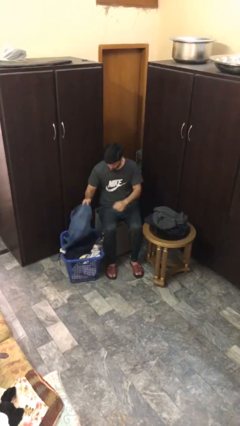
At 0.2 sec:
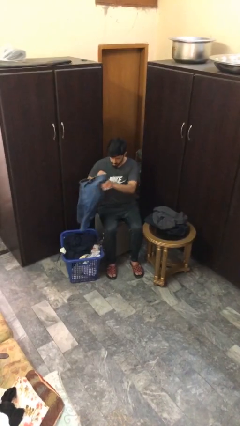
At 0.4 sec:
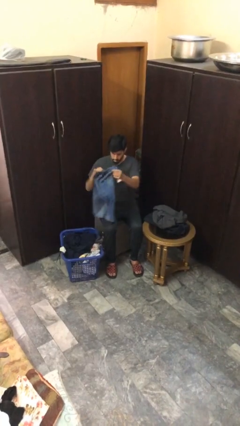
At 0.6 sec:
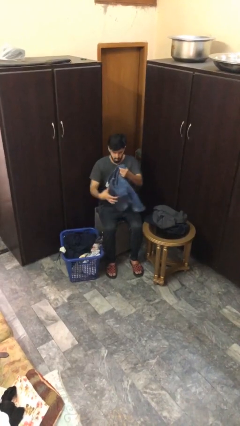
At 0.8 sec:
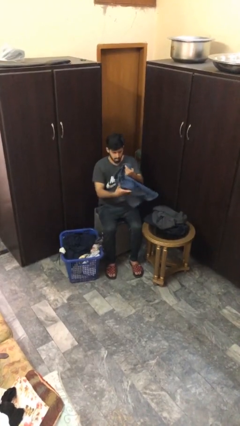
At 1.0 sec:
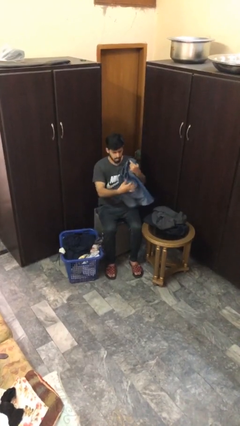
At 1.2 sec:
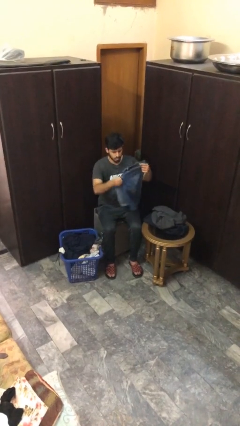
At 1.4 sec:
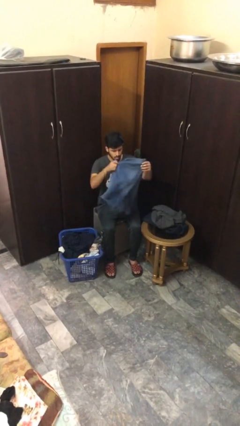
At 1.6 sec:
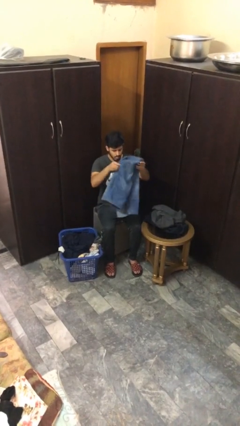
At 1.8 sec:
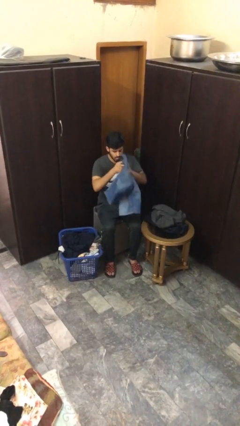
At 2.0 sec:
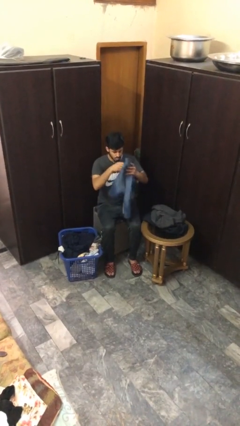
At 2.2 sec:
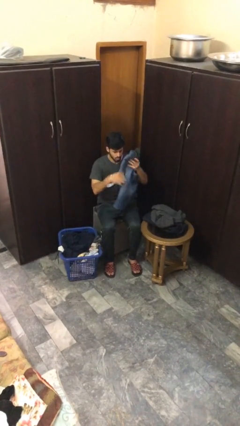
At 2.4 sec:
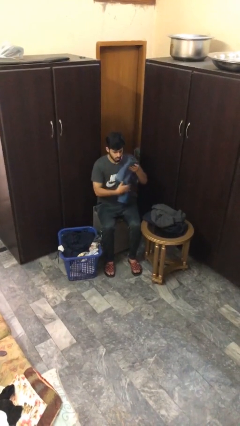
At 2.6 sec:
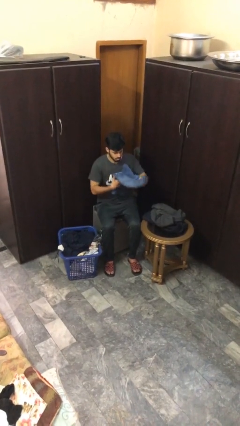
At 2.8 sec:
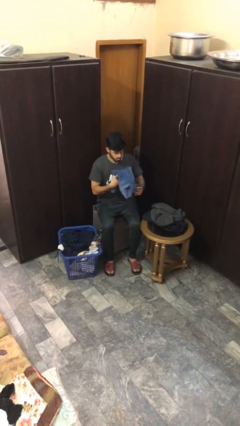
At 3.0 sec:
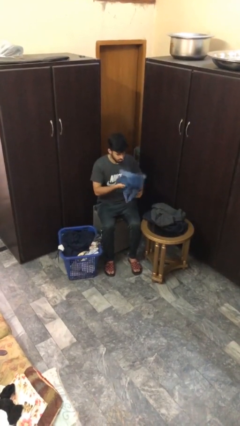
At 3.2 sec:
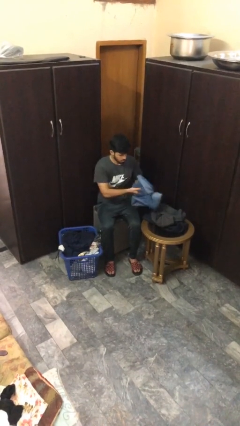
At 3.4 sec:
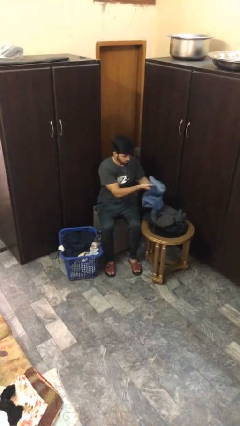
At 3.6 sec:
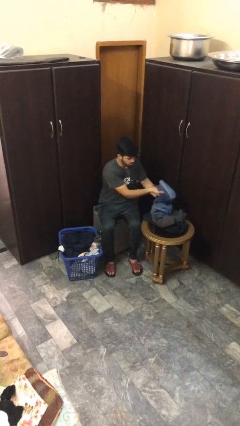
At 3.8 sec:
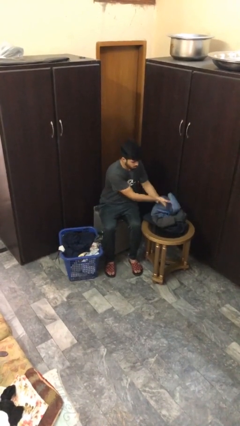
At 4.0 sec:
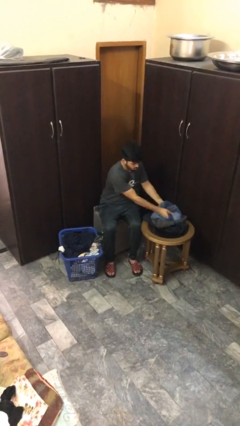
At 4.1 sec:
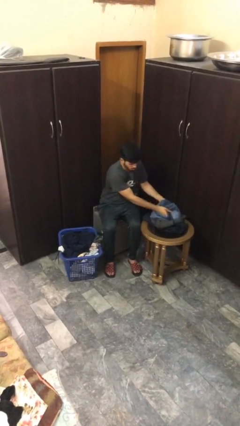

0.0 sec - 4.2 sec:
person folds pants

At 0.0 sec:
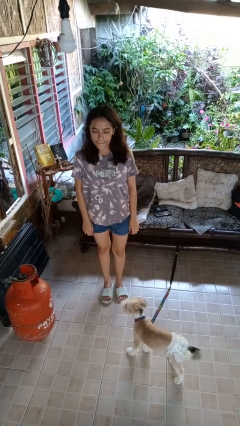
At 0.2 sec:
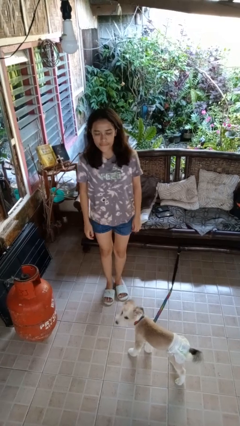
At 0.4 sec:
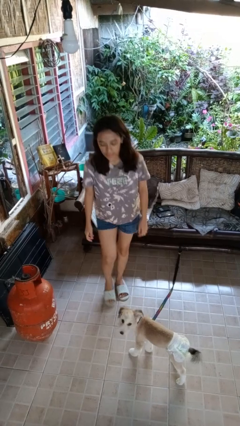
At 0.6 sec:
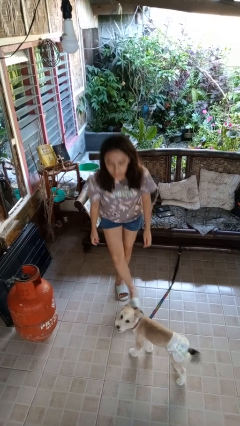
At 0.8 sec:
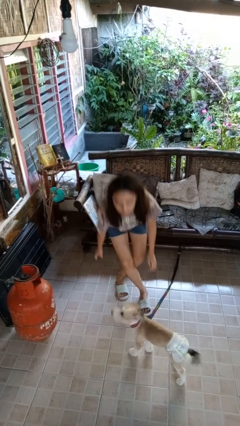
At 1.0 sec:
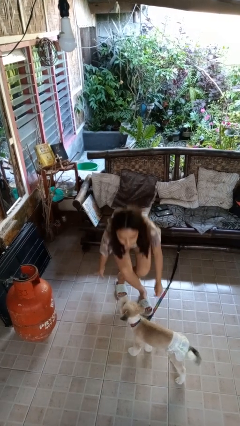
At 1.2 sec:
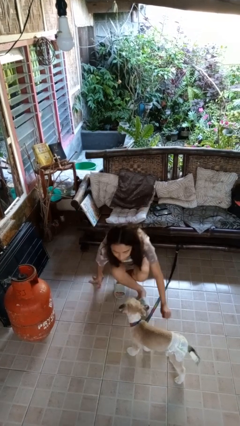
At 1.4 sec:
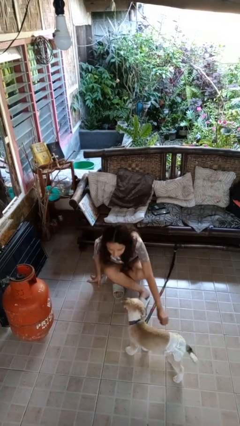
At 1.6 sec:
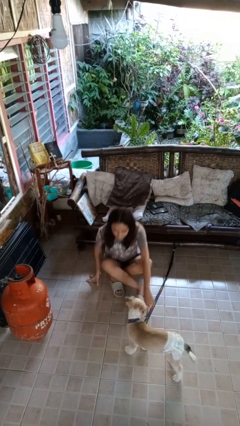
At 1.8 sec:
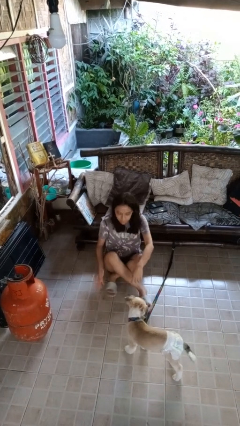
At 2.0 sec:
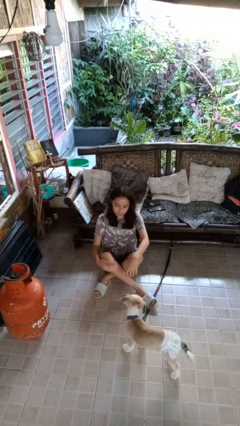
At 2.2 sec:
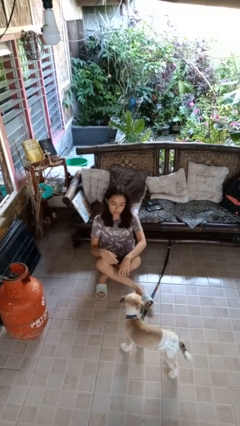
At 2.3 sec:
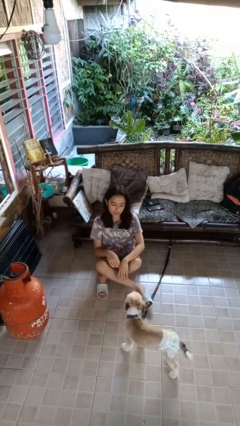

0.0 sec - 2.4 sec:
person sits crisscross

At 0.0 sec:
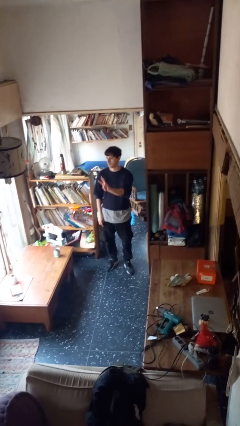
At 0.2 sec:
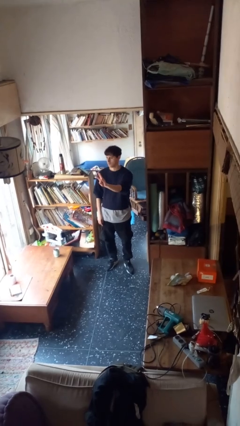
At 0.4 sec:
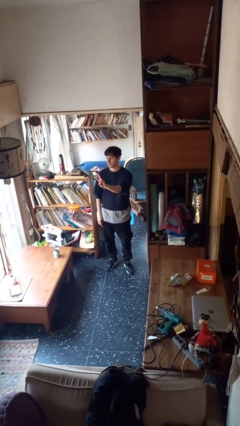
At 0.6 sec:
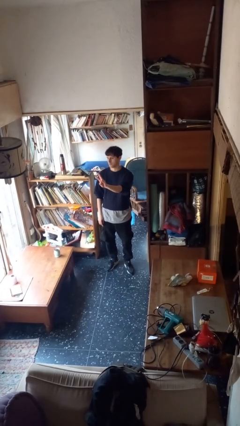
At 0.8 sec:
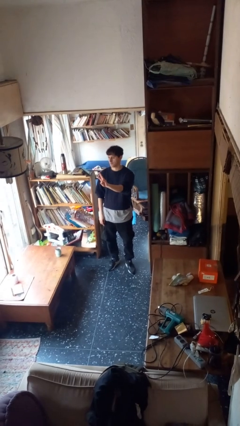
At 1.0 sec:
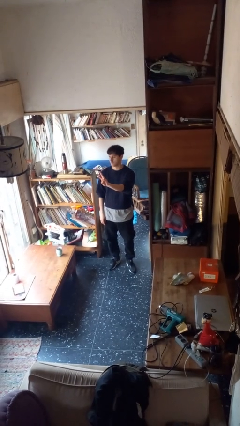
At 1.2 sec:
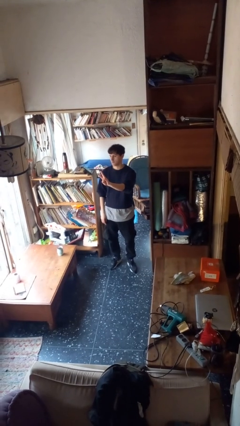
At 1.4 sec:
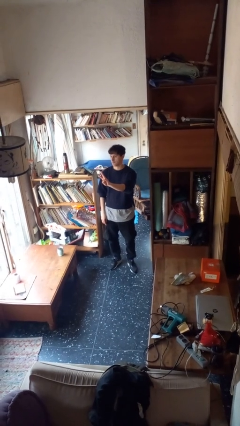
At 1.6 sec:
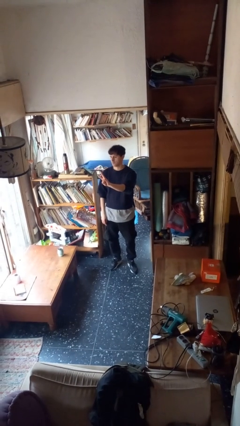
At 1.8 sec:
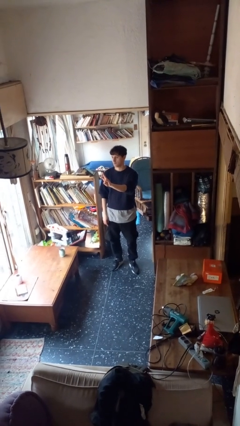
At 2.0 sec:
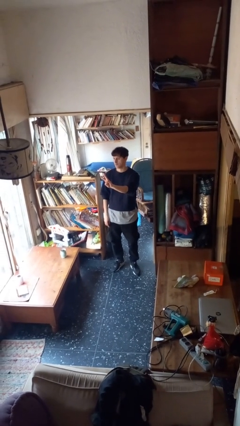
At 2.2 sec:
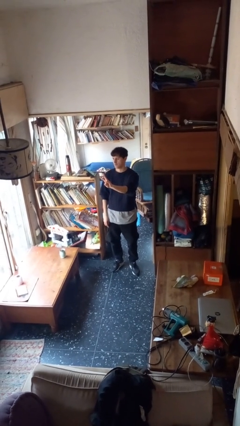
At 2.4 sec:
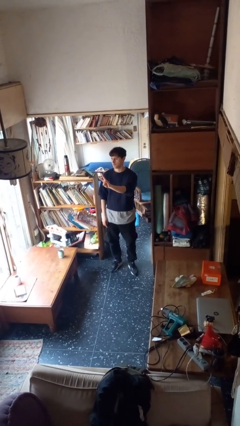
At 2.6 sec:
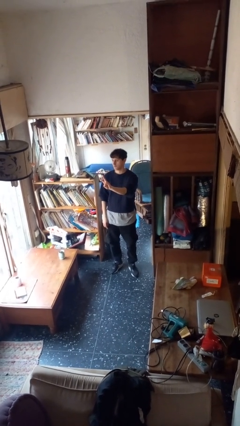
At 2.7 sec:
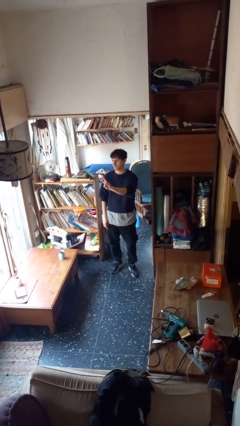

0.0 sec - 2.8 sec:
person gestures number three

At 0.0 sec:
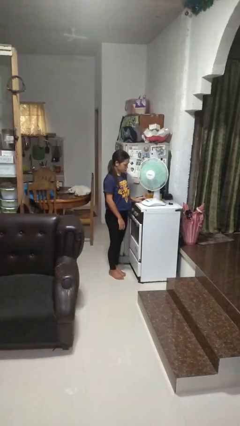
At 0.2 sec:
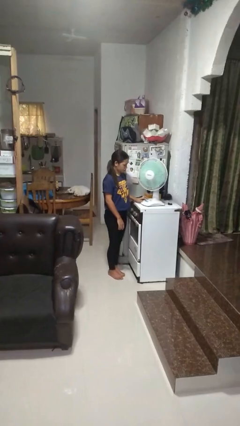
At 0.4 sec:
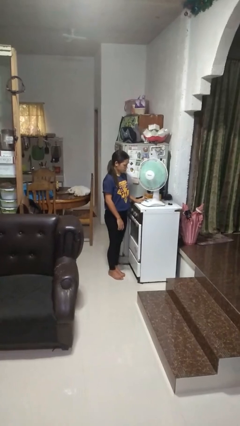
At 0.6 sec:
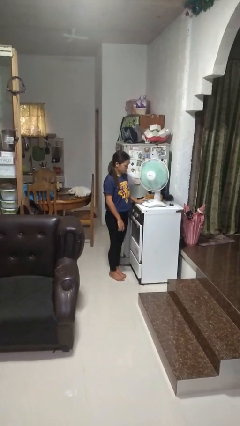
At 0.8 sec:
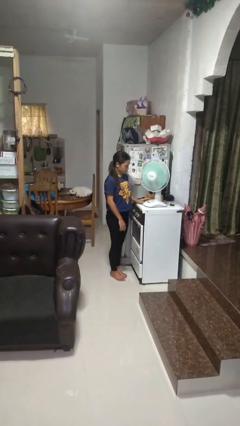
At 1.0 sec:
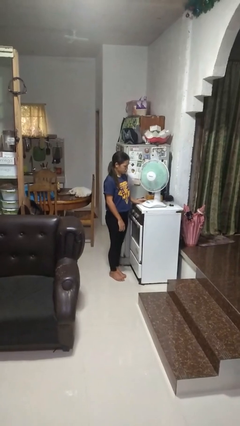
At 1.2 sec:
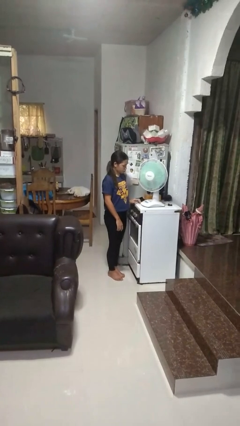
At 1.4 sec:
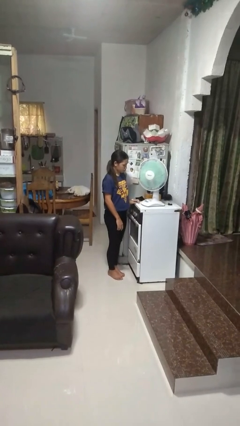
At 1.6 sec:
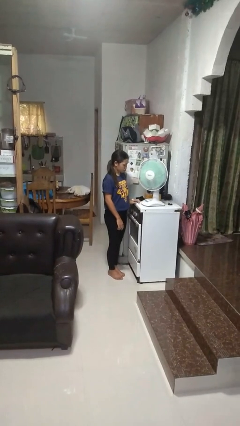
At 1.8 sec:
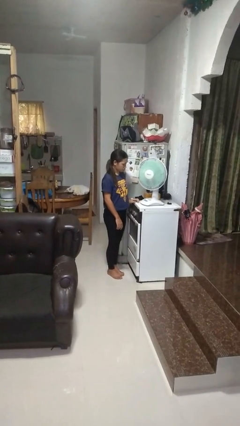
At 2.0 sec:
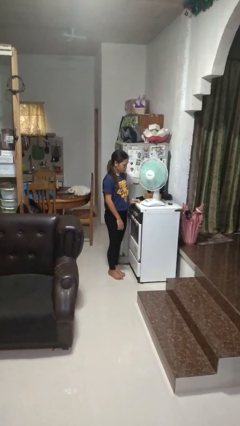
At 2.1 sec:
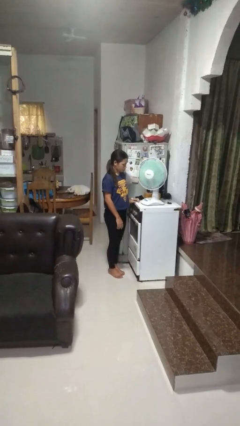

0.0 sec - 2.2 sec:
person turns off fan

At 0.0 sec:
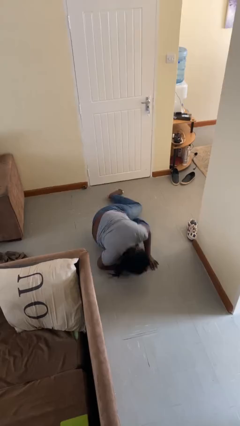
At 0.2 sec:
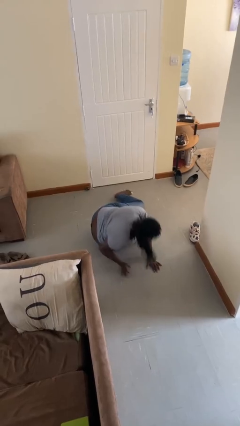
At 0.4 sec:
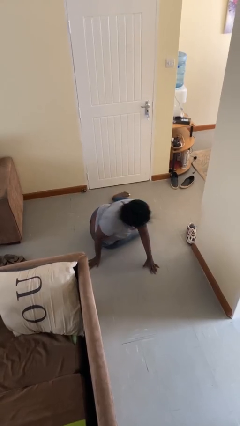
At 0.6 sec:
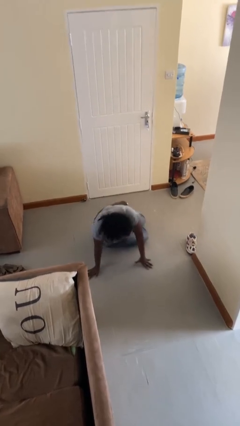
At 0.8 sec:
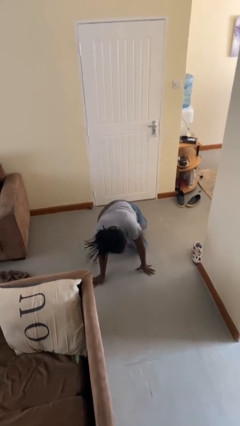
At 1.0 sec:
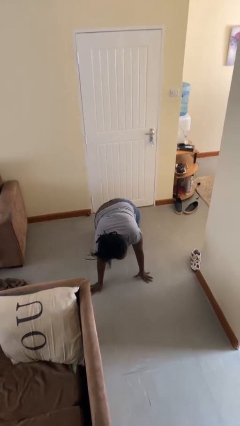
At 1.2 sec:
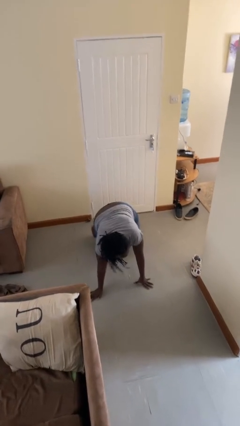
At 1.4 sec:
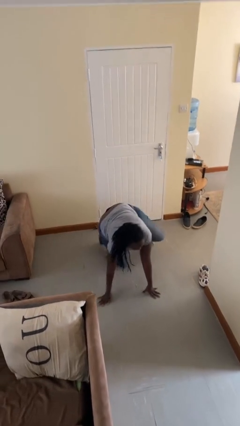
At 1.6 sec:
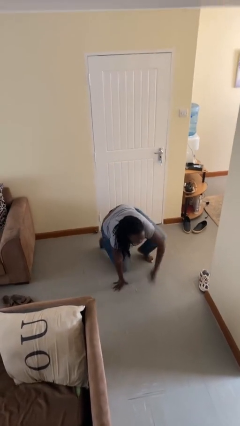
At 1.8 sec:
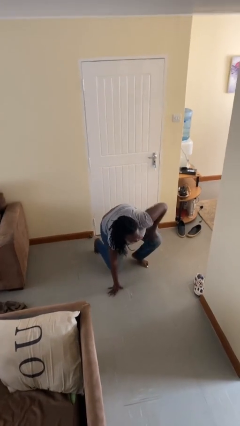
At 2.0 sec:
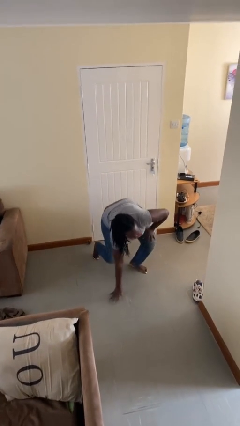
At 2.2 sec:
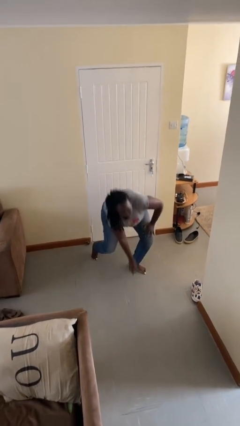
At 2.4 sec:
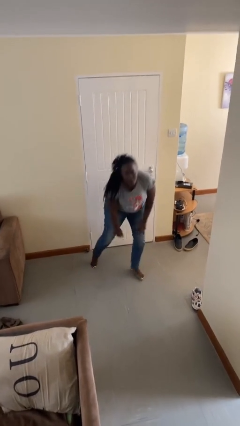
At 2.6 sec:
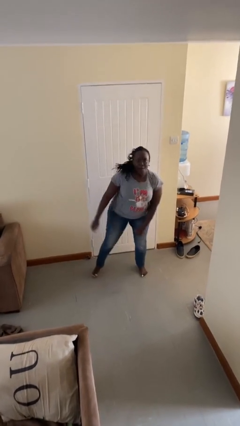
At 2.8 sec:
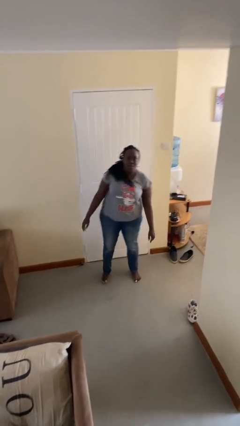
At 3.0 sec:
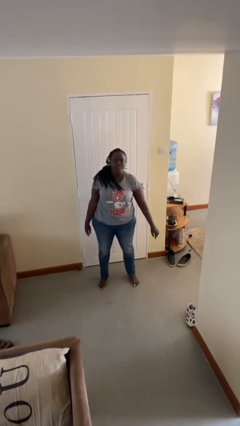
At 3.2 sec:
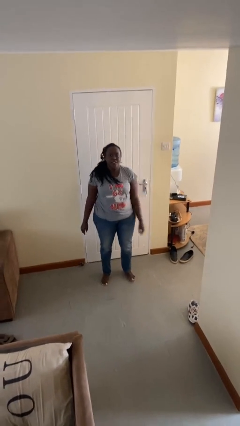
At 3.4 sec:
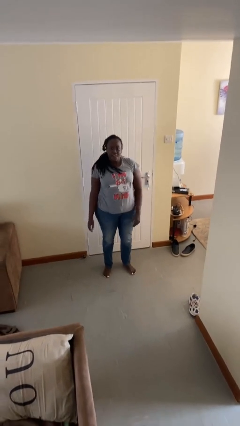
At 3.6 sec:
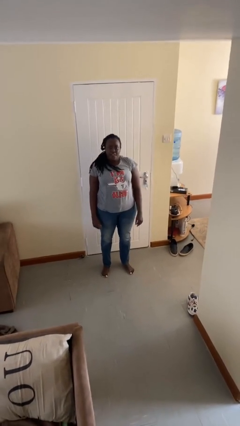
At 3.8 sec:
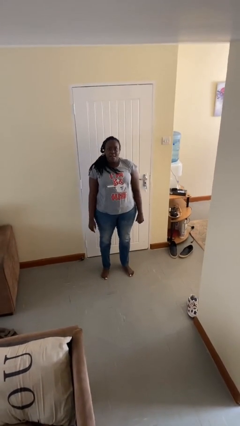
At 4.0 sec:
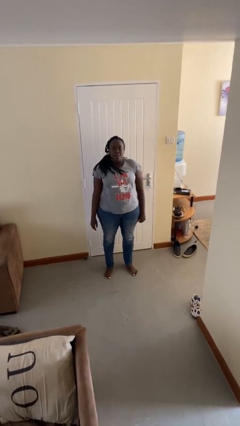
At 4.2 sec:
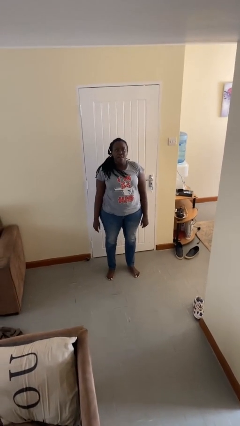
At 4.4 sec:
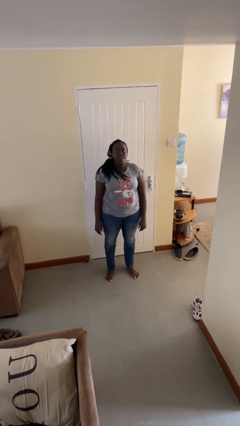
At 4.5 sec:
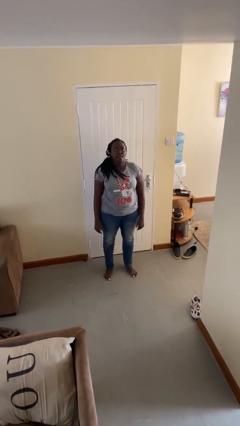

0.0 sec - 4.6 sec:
person stands up from floor

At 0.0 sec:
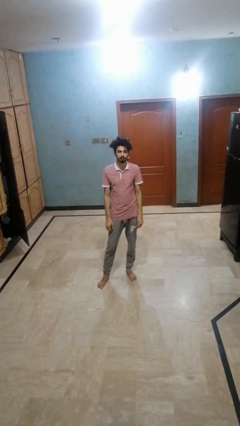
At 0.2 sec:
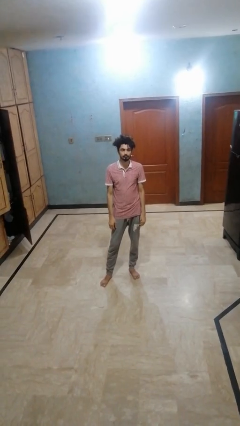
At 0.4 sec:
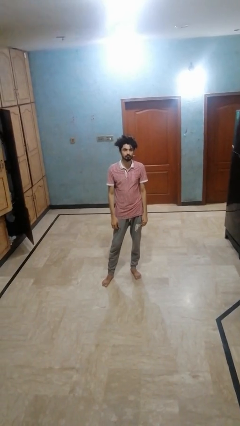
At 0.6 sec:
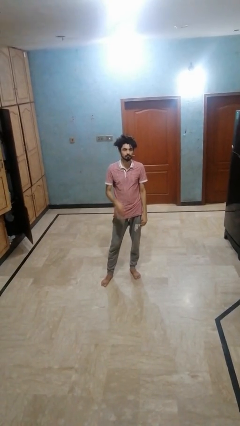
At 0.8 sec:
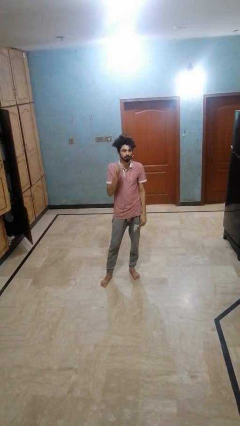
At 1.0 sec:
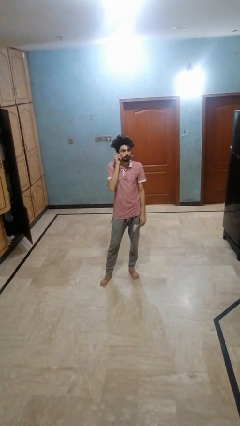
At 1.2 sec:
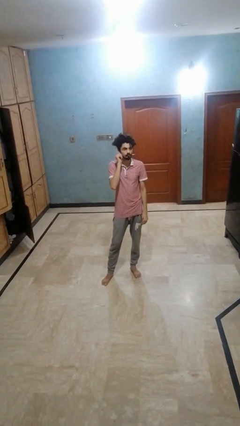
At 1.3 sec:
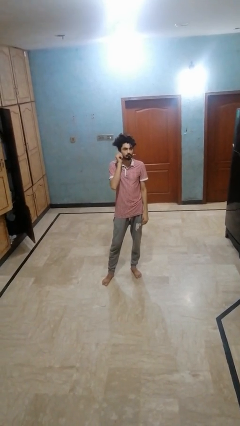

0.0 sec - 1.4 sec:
person touches earlobe
